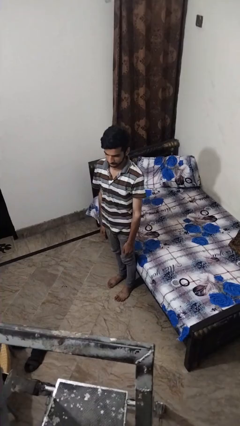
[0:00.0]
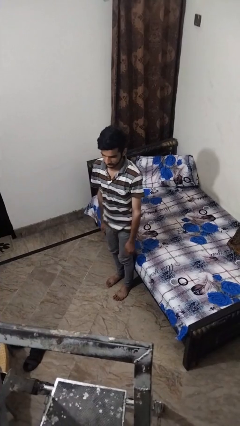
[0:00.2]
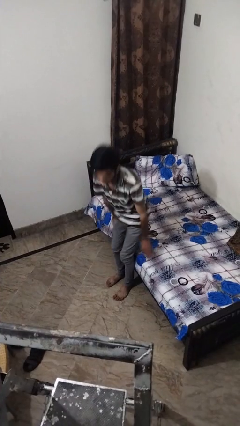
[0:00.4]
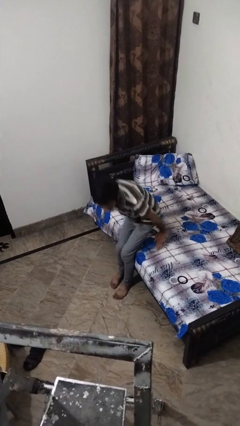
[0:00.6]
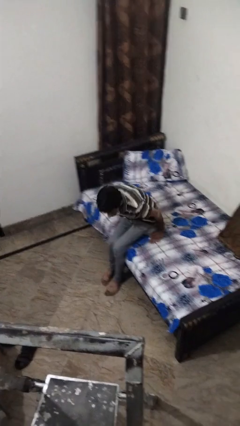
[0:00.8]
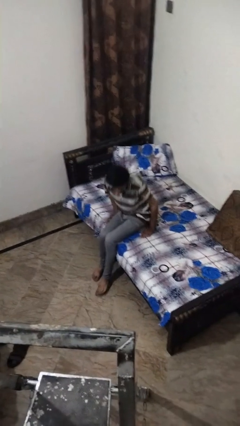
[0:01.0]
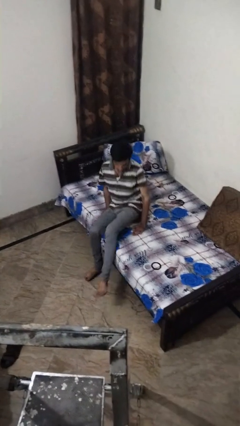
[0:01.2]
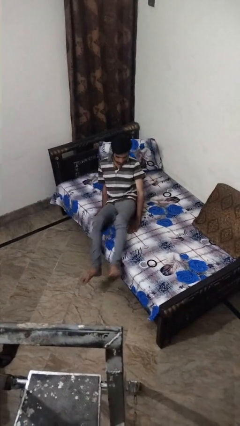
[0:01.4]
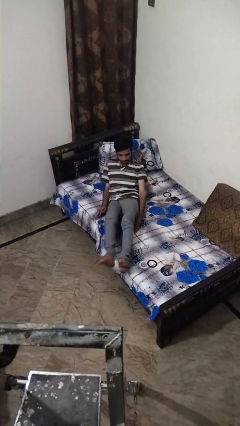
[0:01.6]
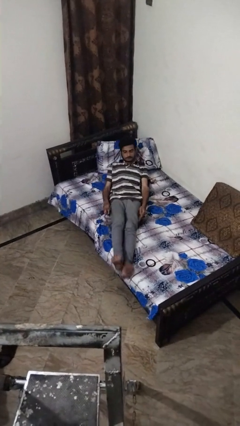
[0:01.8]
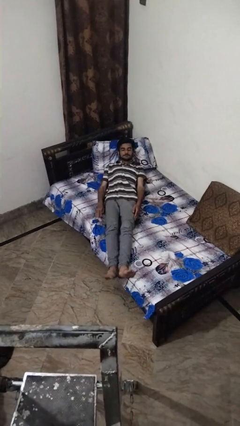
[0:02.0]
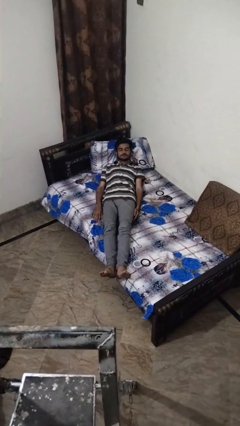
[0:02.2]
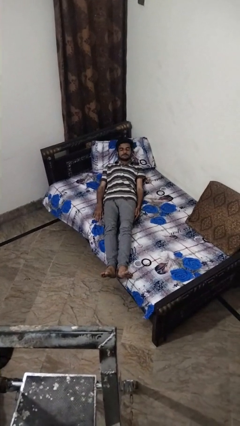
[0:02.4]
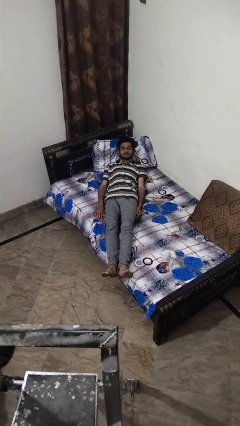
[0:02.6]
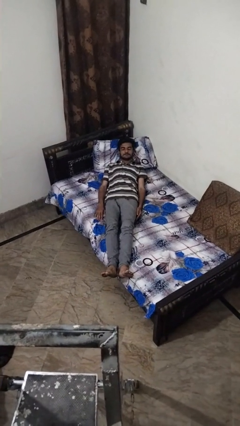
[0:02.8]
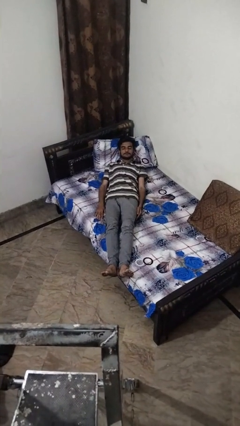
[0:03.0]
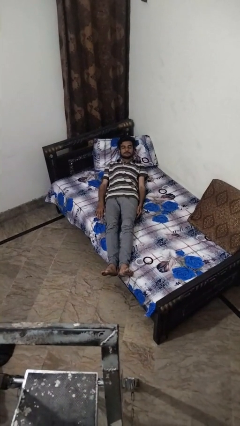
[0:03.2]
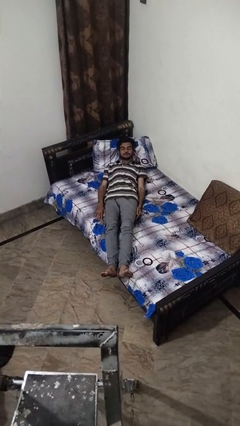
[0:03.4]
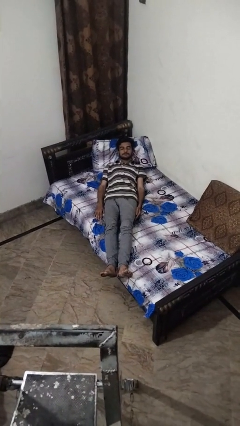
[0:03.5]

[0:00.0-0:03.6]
person lies down on bed

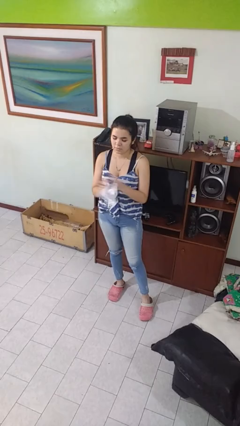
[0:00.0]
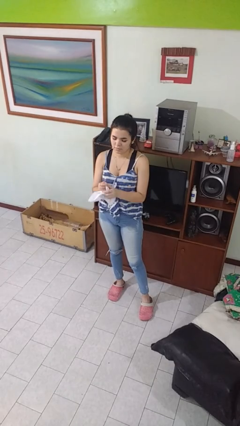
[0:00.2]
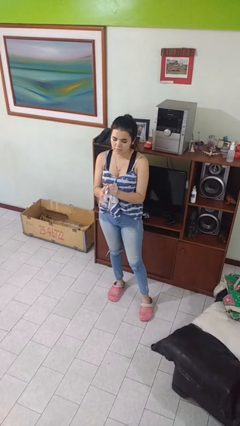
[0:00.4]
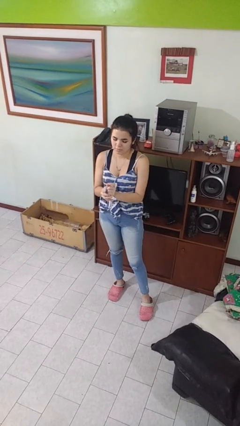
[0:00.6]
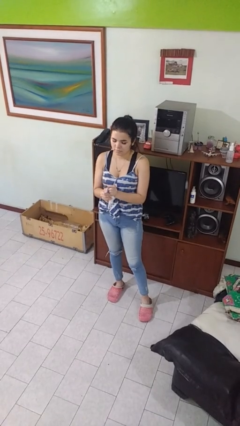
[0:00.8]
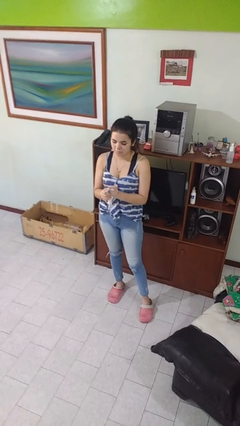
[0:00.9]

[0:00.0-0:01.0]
person crumples paper

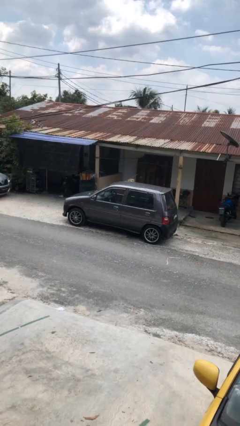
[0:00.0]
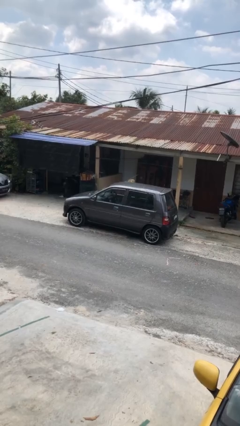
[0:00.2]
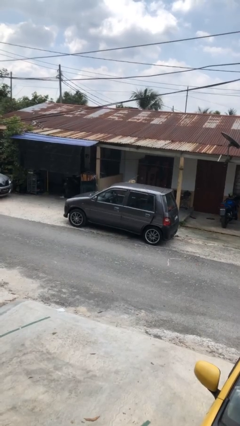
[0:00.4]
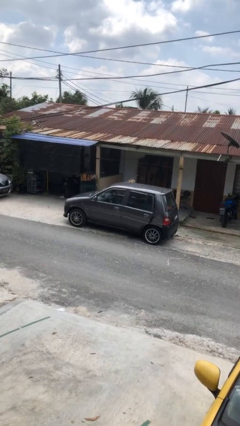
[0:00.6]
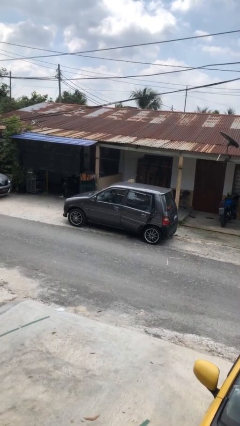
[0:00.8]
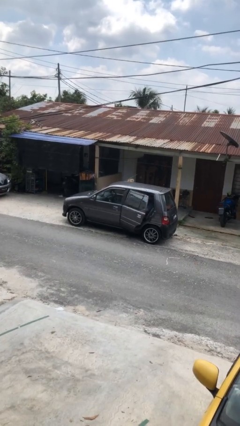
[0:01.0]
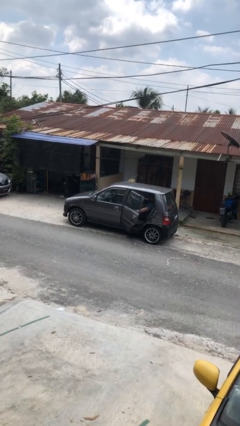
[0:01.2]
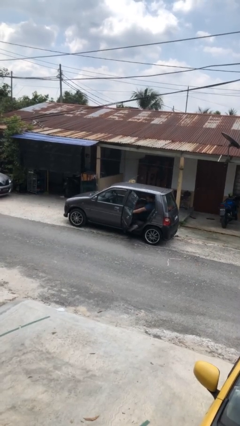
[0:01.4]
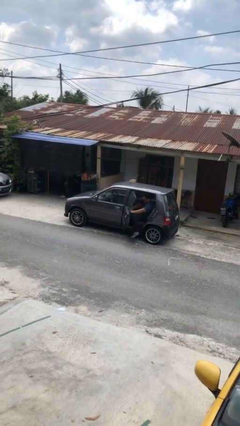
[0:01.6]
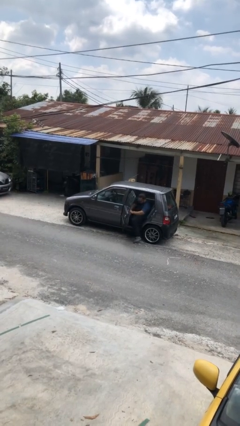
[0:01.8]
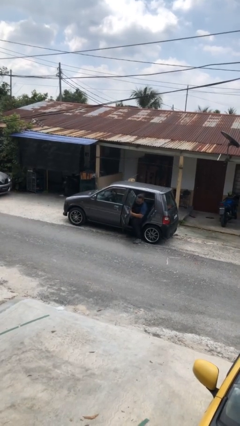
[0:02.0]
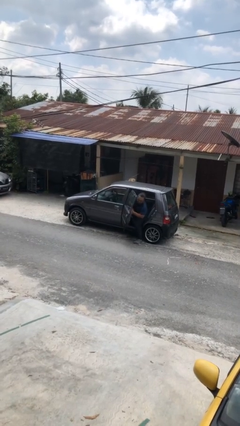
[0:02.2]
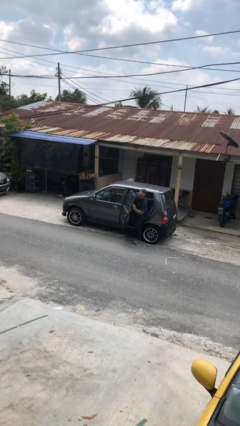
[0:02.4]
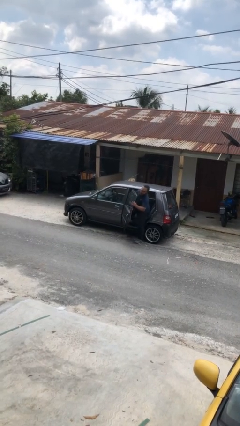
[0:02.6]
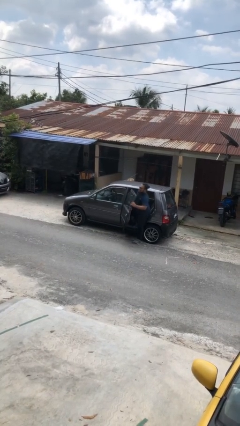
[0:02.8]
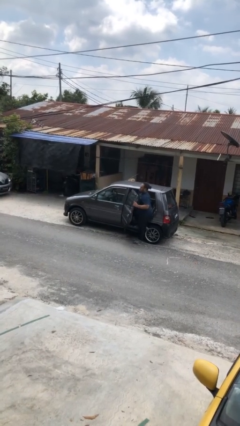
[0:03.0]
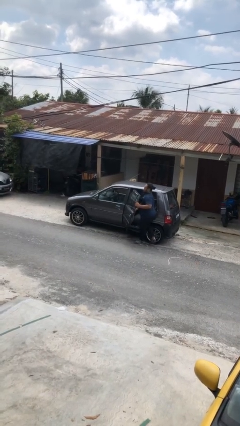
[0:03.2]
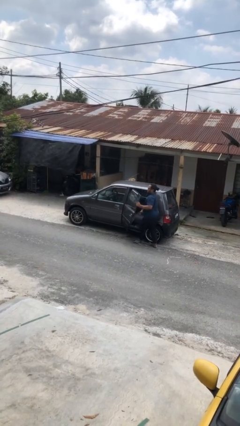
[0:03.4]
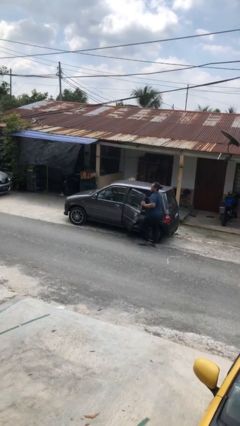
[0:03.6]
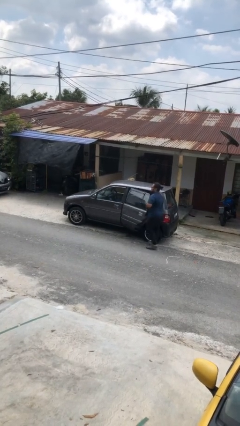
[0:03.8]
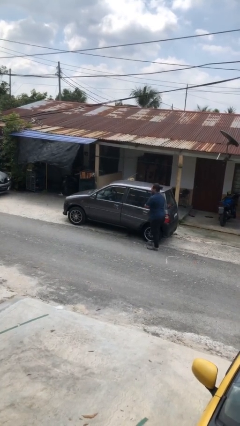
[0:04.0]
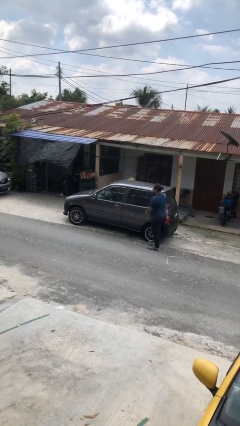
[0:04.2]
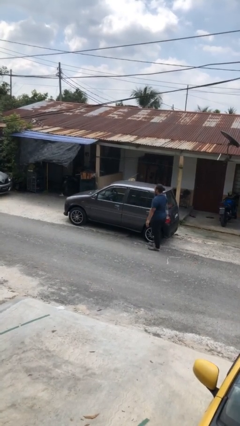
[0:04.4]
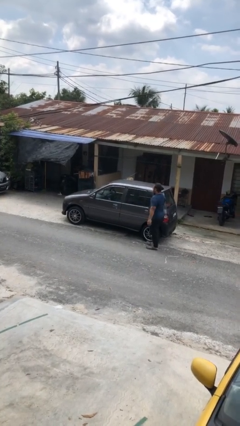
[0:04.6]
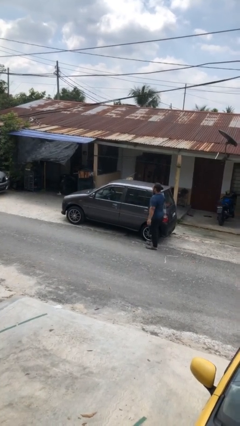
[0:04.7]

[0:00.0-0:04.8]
car drops off person

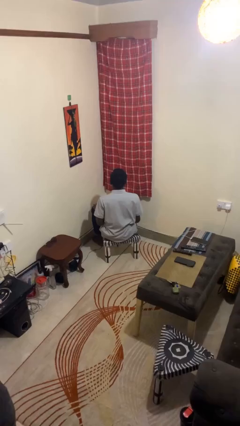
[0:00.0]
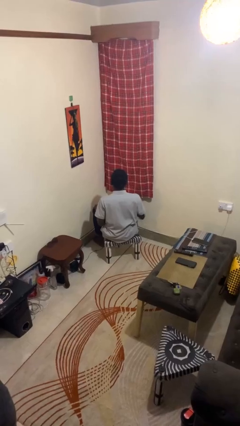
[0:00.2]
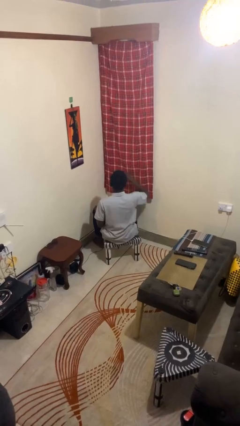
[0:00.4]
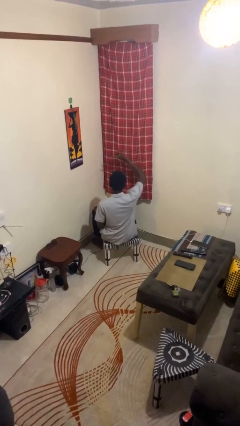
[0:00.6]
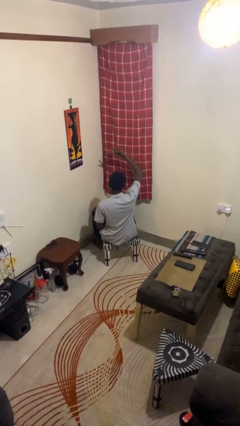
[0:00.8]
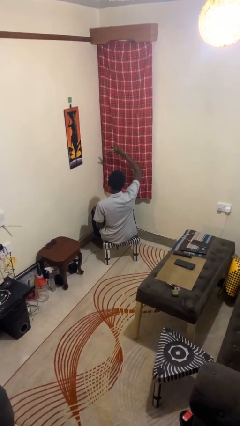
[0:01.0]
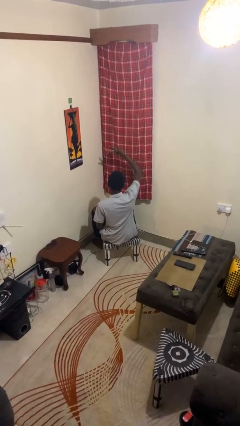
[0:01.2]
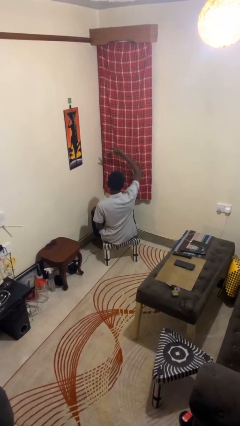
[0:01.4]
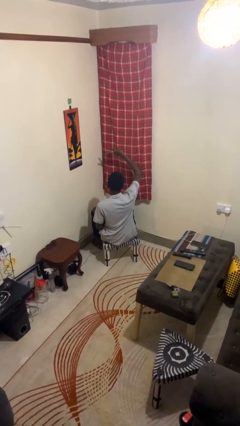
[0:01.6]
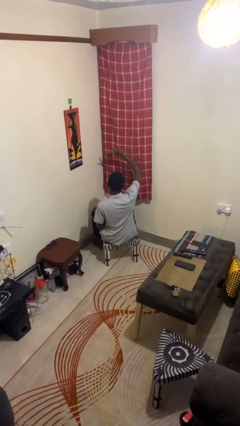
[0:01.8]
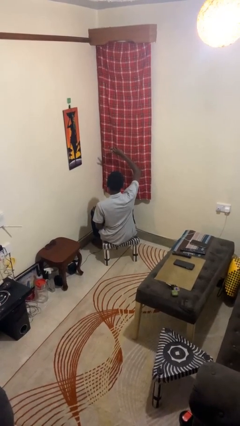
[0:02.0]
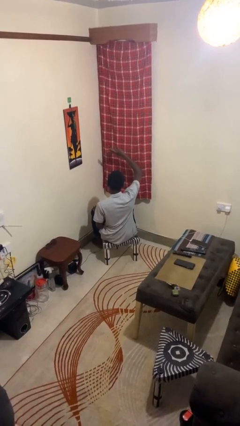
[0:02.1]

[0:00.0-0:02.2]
person gestures peace

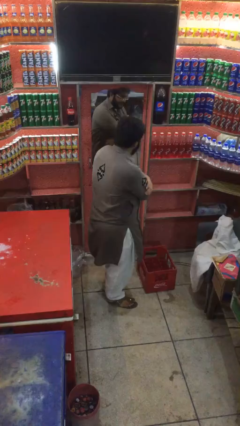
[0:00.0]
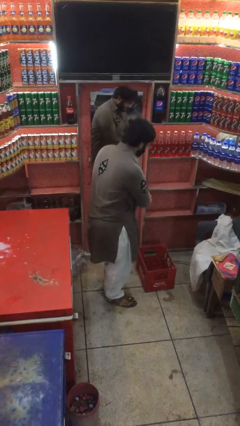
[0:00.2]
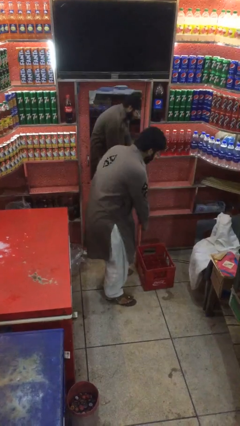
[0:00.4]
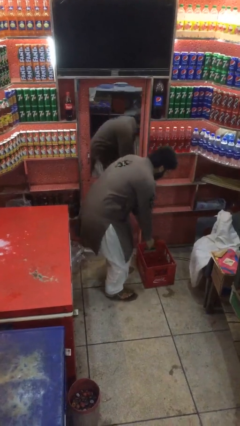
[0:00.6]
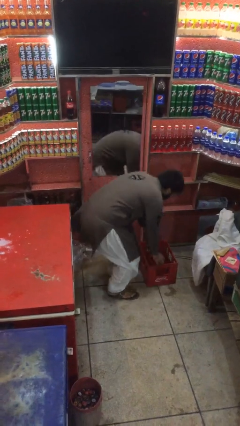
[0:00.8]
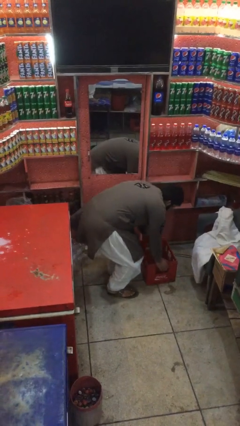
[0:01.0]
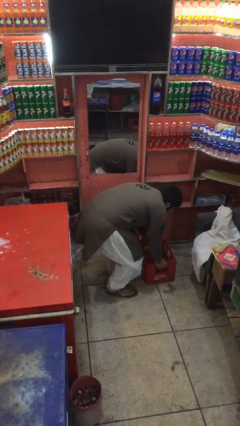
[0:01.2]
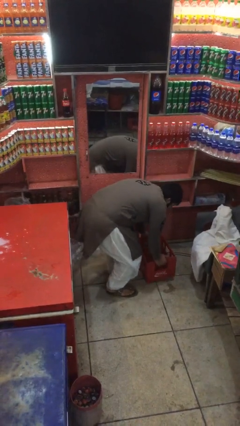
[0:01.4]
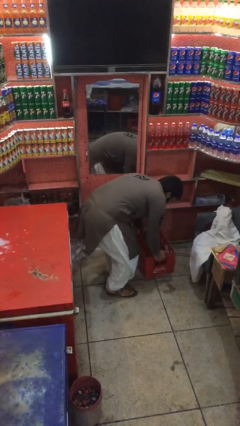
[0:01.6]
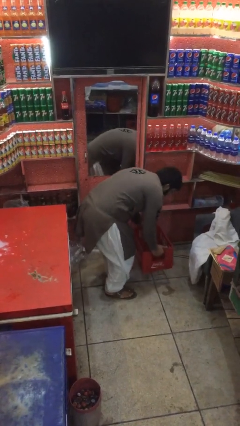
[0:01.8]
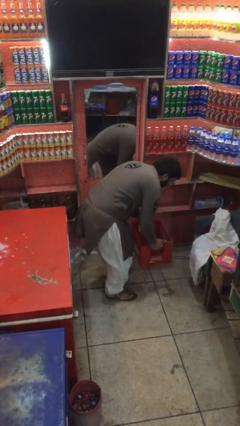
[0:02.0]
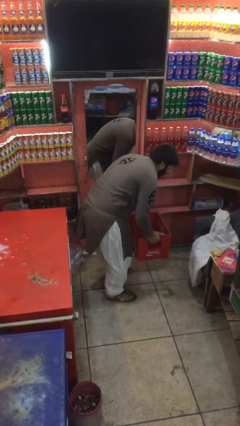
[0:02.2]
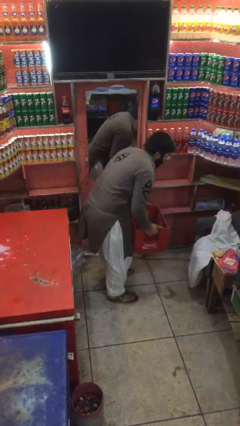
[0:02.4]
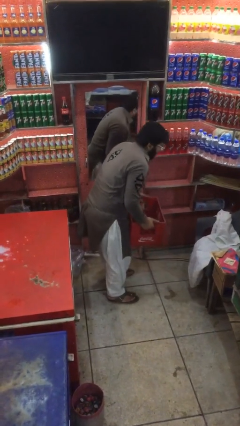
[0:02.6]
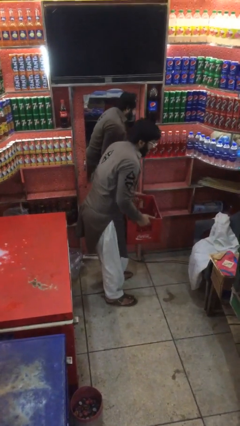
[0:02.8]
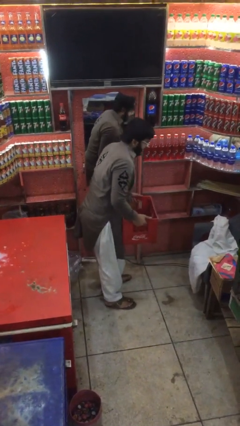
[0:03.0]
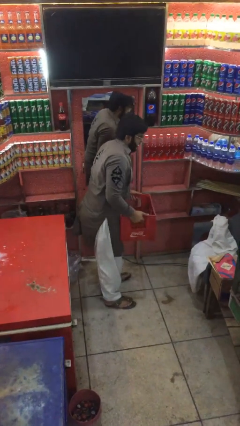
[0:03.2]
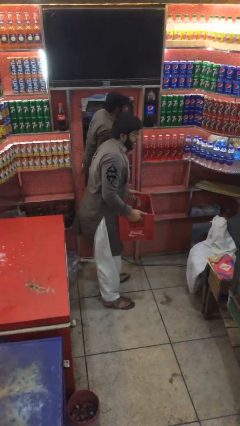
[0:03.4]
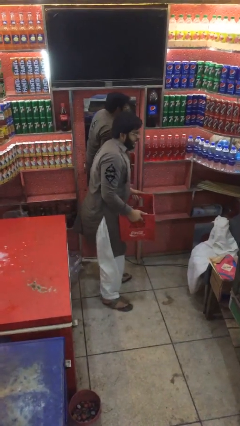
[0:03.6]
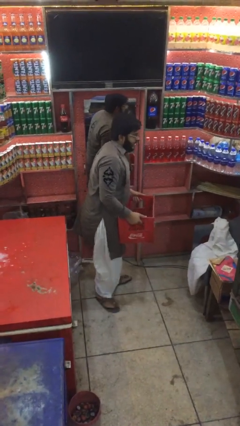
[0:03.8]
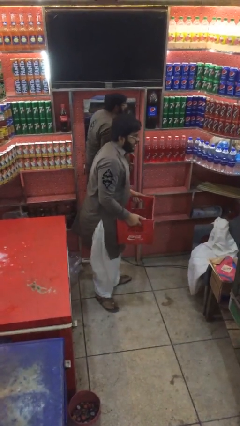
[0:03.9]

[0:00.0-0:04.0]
person picks up object from floor

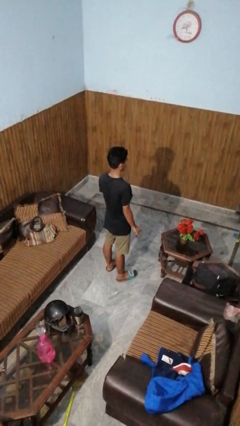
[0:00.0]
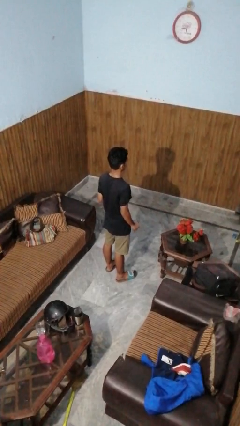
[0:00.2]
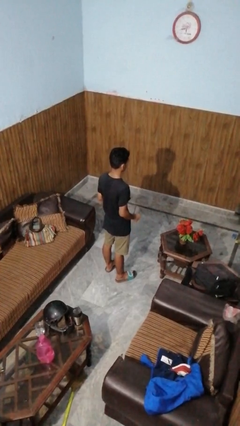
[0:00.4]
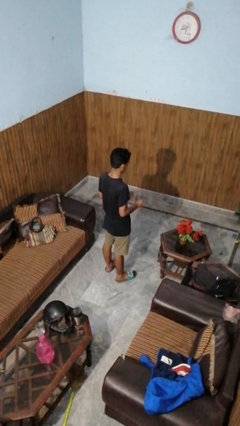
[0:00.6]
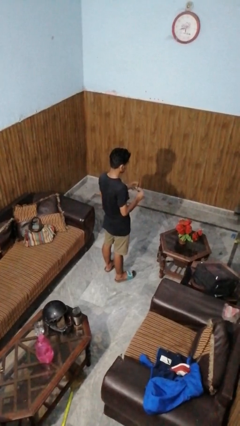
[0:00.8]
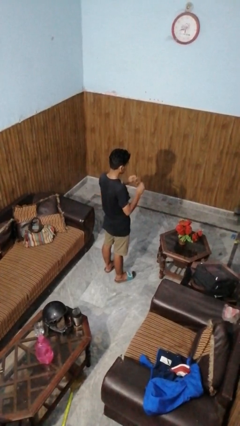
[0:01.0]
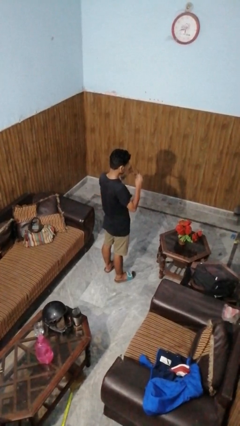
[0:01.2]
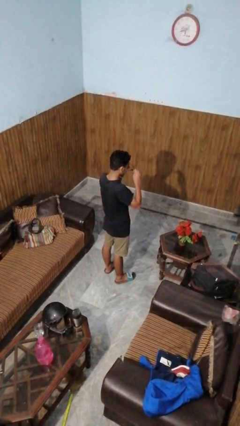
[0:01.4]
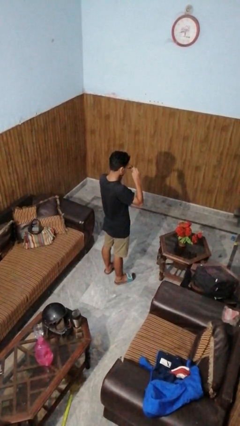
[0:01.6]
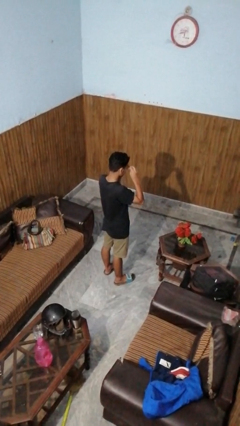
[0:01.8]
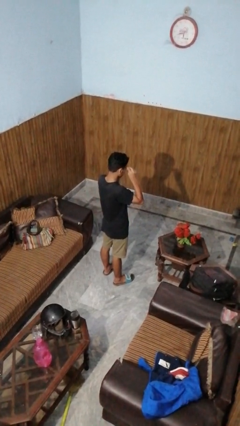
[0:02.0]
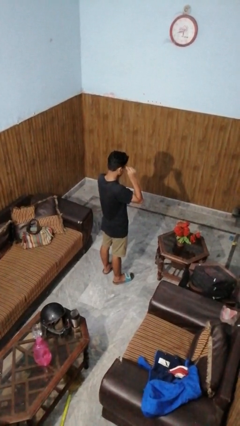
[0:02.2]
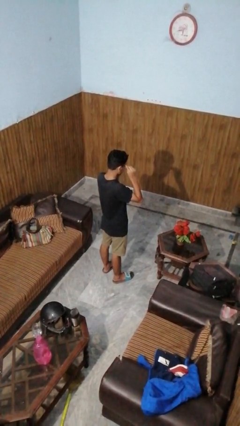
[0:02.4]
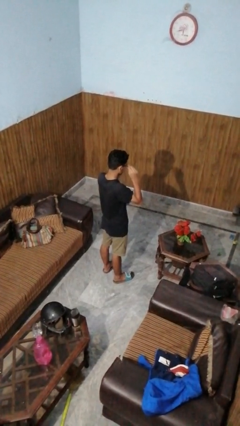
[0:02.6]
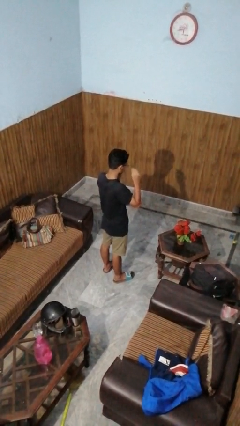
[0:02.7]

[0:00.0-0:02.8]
person puts on glasses
